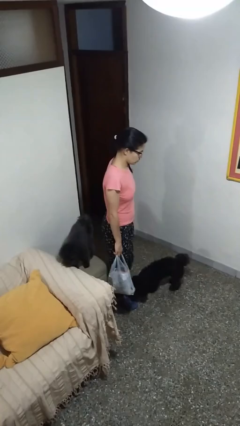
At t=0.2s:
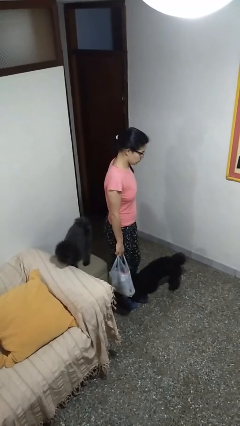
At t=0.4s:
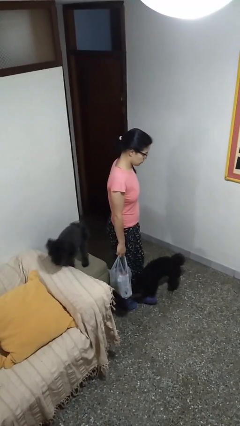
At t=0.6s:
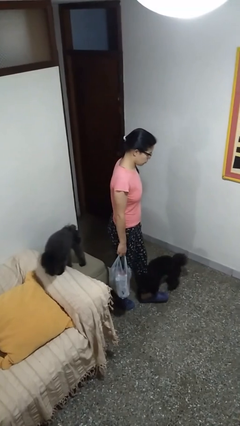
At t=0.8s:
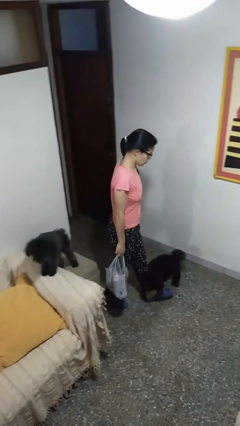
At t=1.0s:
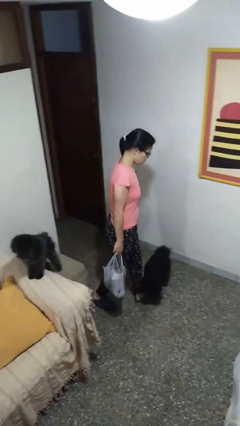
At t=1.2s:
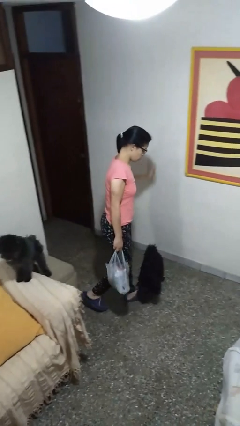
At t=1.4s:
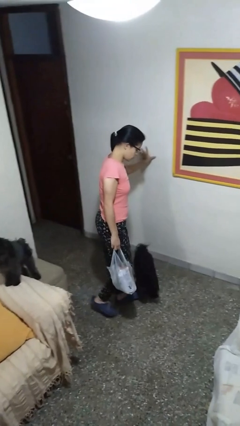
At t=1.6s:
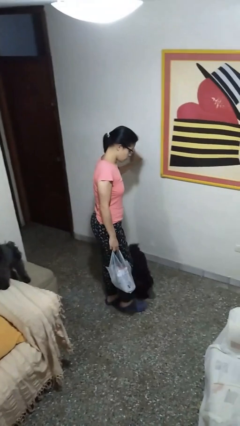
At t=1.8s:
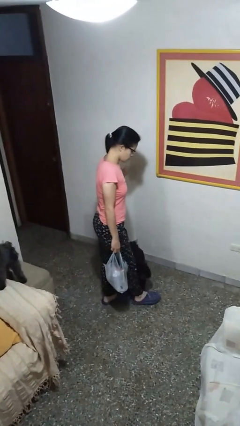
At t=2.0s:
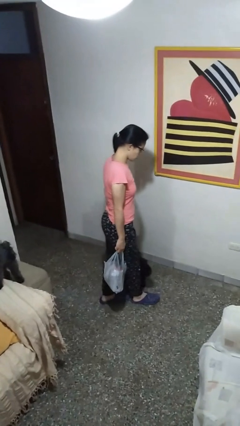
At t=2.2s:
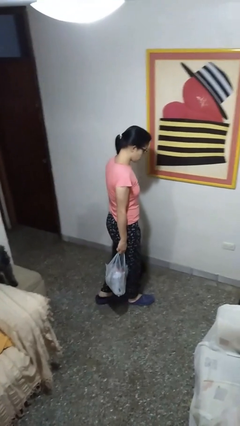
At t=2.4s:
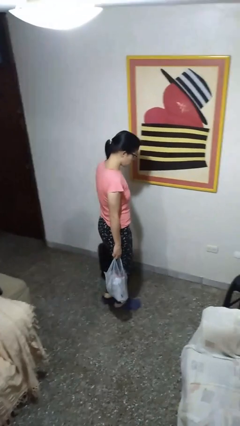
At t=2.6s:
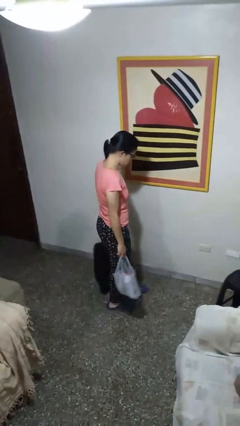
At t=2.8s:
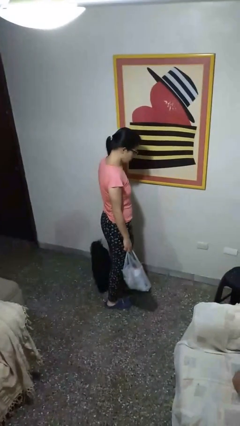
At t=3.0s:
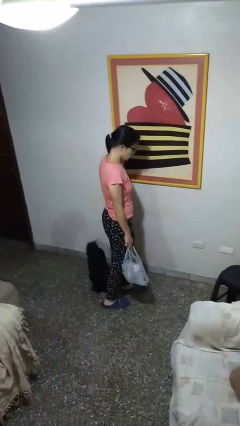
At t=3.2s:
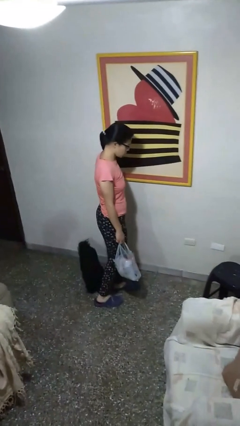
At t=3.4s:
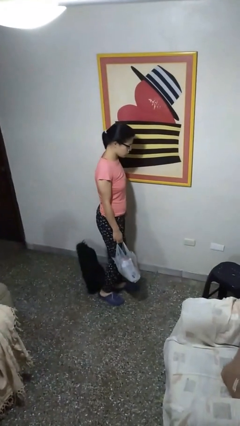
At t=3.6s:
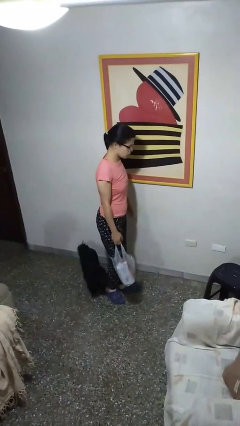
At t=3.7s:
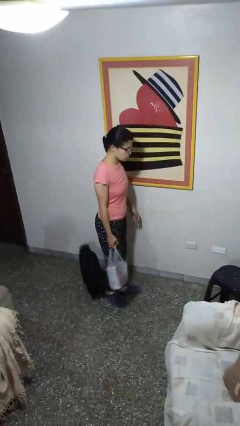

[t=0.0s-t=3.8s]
person carries groceries

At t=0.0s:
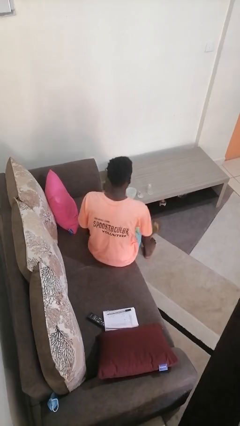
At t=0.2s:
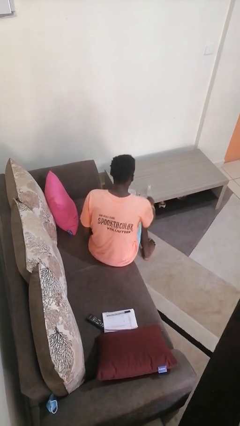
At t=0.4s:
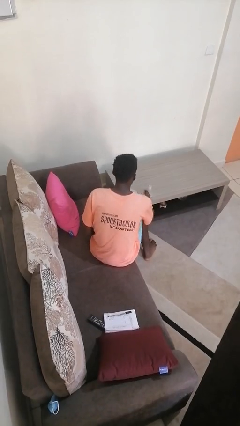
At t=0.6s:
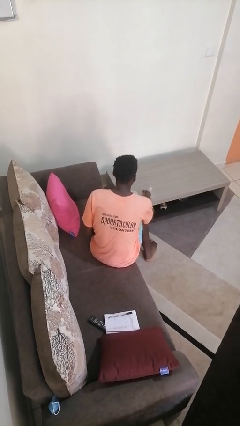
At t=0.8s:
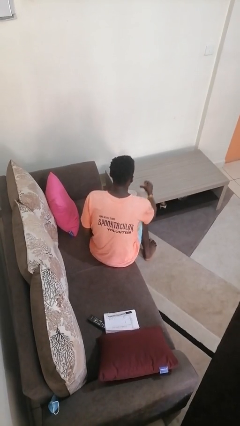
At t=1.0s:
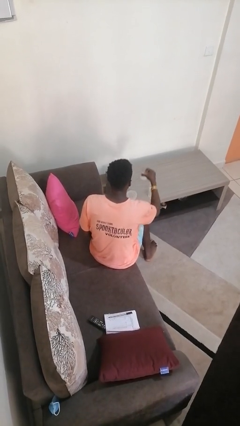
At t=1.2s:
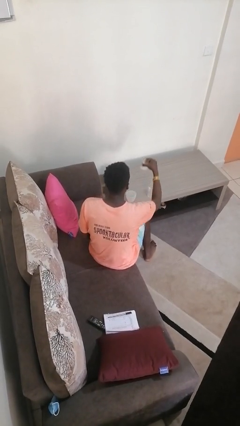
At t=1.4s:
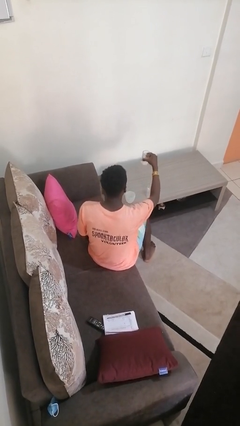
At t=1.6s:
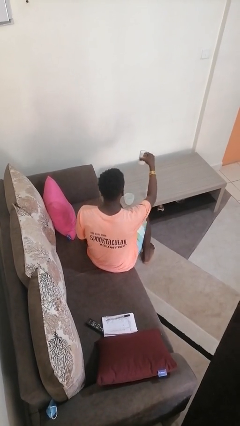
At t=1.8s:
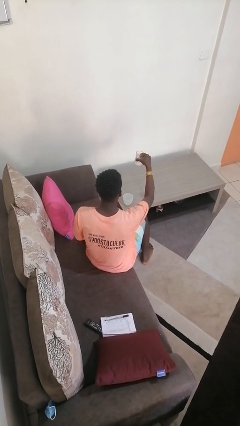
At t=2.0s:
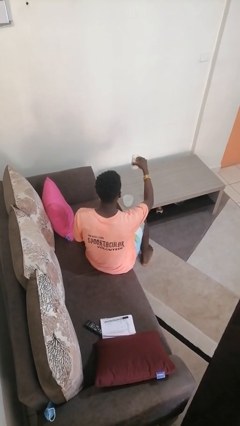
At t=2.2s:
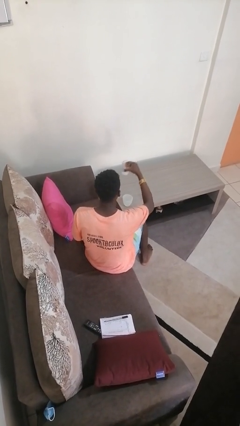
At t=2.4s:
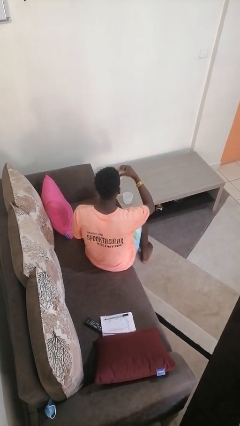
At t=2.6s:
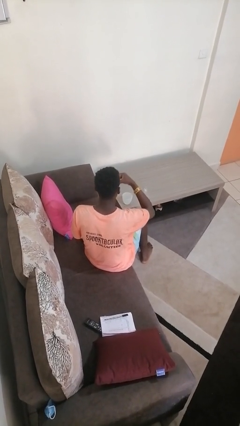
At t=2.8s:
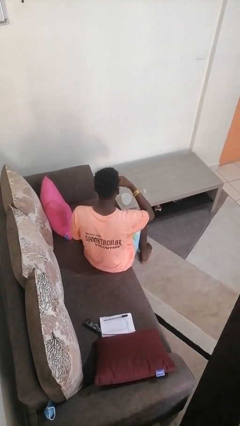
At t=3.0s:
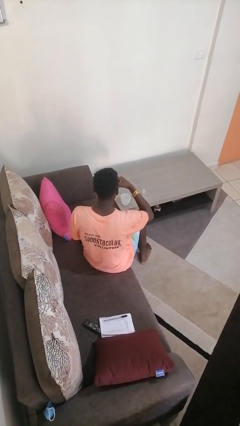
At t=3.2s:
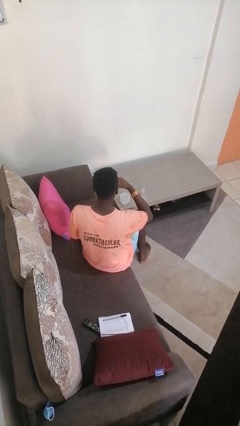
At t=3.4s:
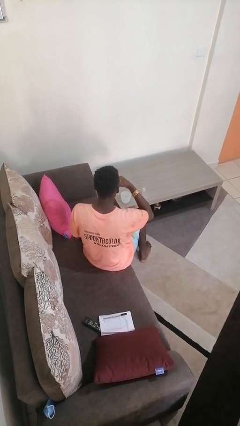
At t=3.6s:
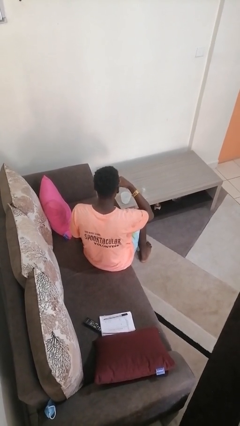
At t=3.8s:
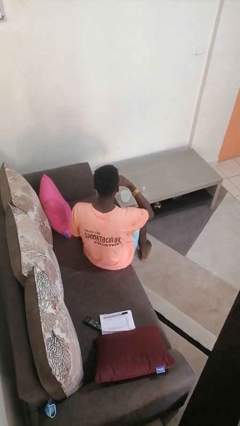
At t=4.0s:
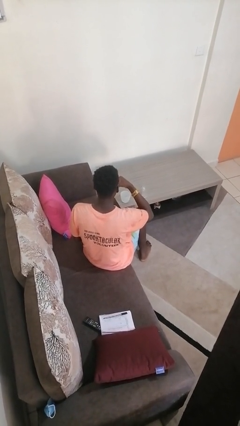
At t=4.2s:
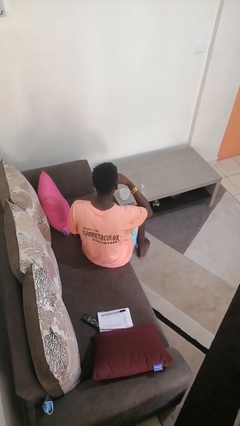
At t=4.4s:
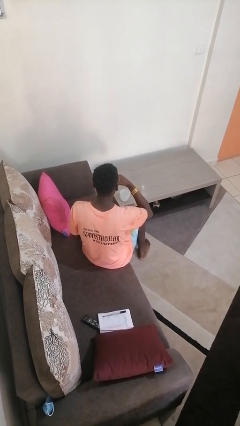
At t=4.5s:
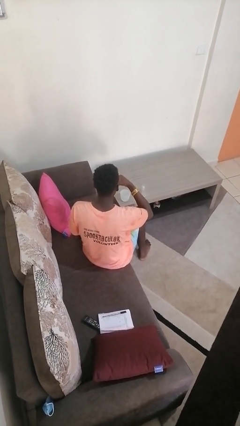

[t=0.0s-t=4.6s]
person picks up object from table

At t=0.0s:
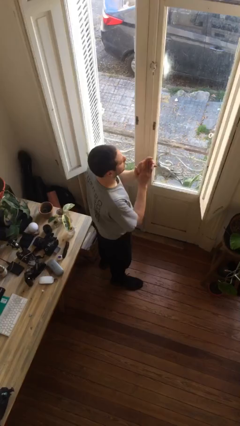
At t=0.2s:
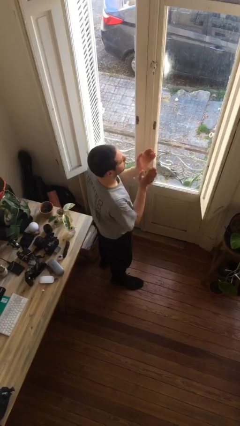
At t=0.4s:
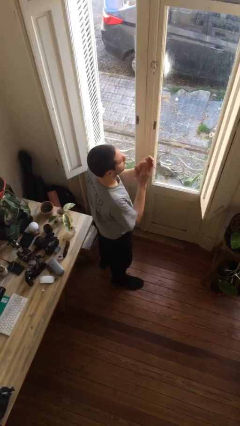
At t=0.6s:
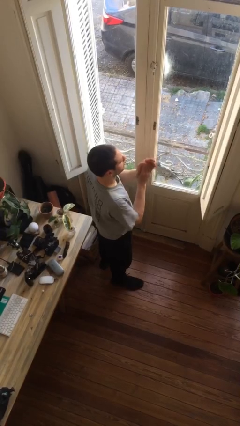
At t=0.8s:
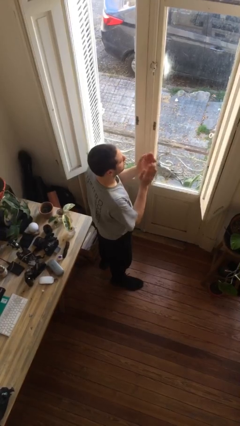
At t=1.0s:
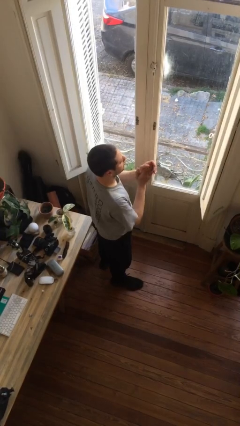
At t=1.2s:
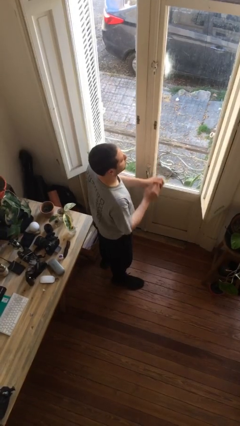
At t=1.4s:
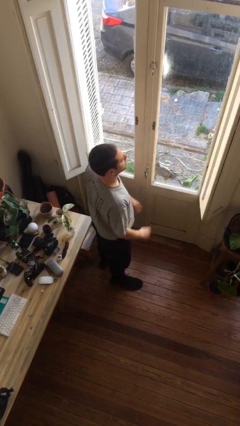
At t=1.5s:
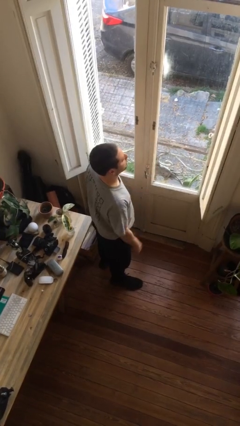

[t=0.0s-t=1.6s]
person claps hands

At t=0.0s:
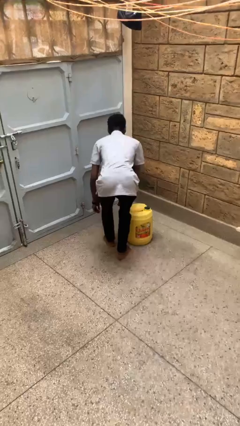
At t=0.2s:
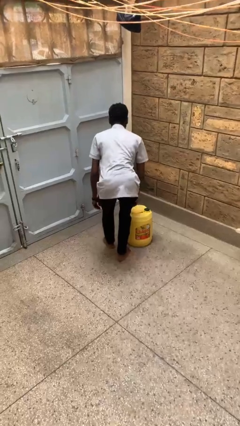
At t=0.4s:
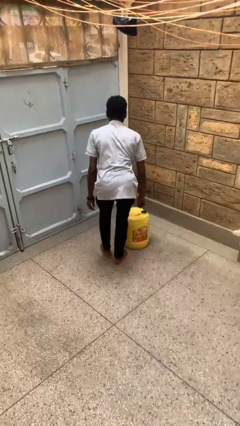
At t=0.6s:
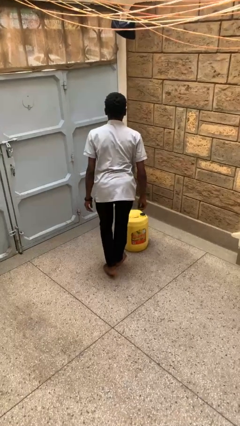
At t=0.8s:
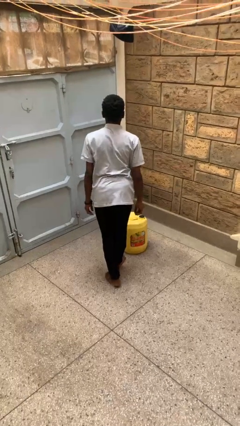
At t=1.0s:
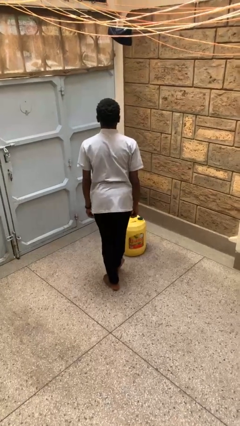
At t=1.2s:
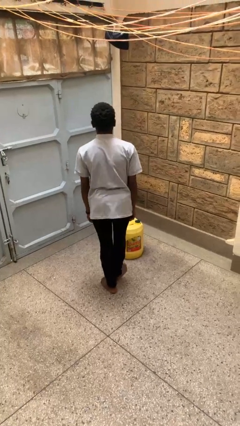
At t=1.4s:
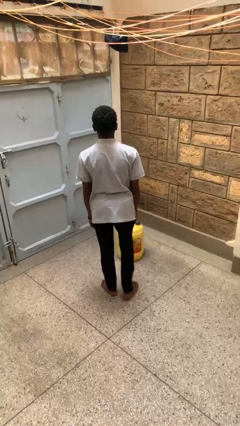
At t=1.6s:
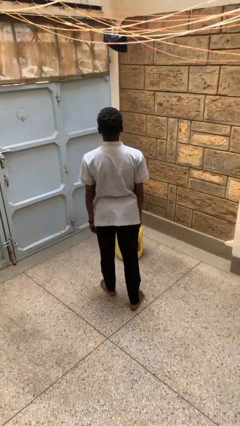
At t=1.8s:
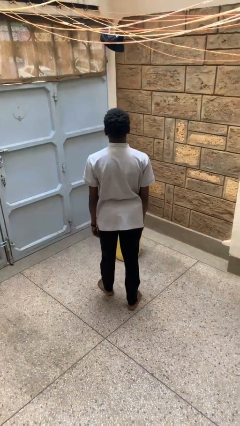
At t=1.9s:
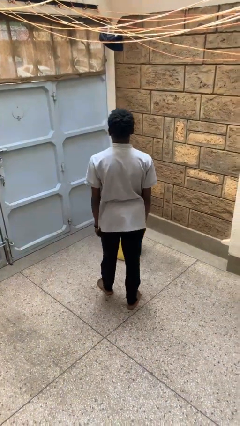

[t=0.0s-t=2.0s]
person stands up from floor

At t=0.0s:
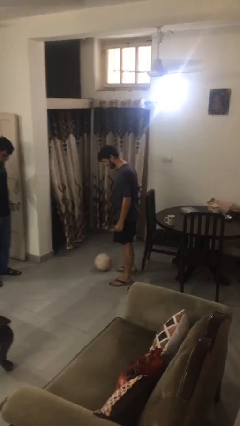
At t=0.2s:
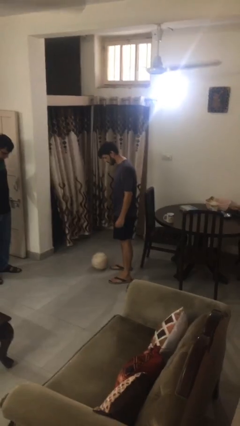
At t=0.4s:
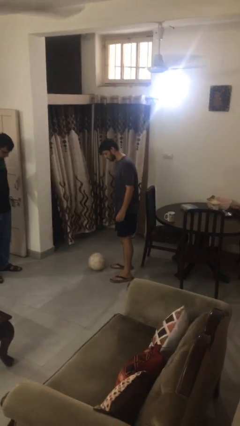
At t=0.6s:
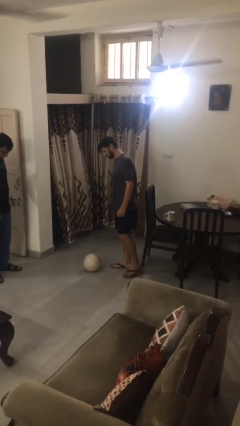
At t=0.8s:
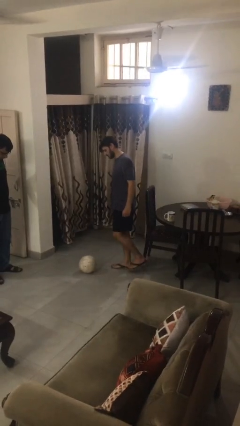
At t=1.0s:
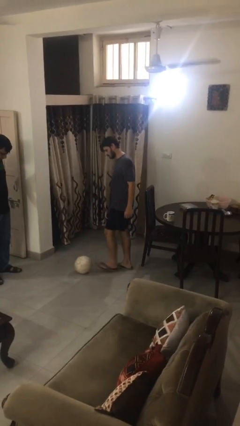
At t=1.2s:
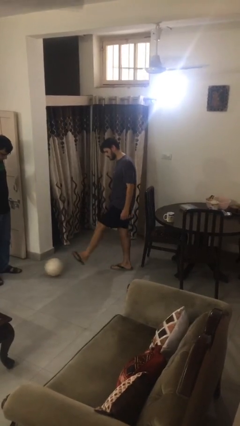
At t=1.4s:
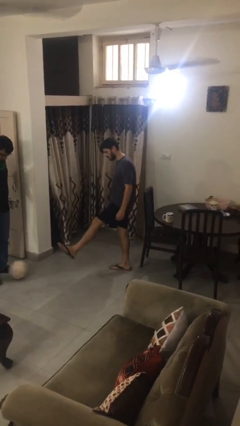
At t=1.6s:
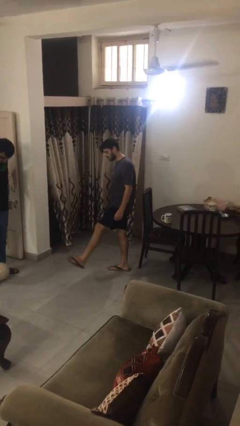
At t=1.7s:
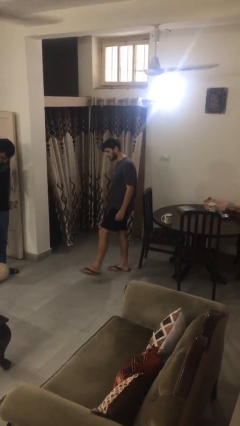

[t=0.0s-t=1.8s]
person kicks object to person

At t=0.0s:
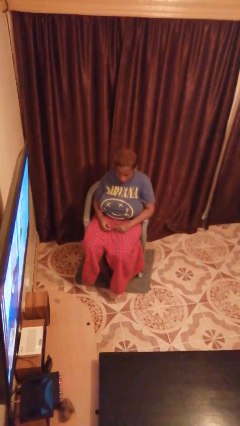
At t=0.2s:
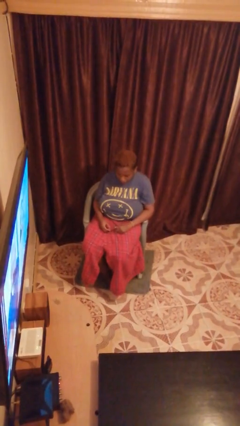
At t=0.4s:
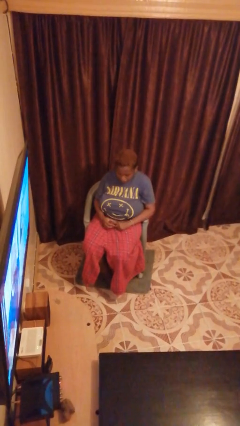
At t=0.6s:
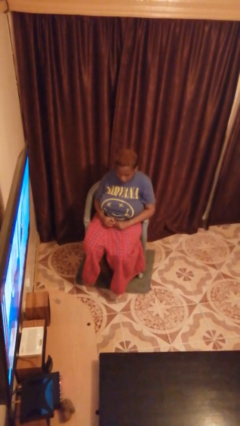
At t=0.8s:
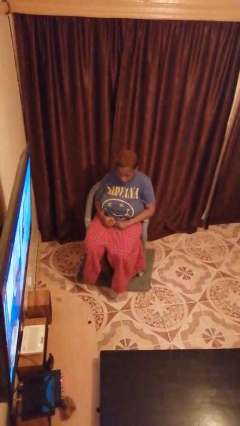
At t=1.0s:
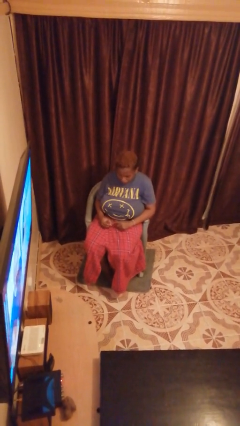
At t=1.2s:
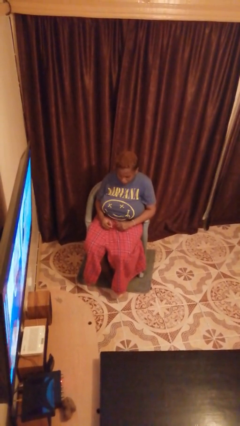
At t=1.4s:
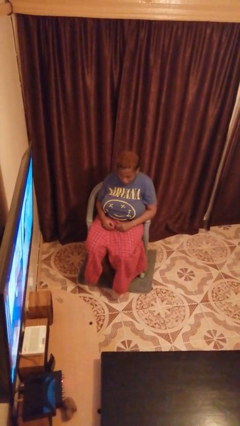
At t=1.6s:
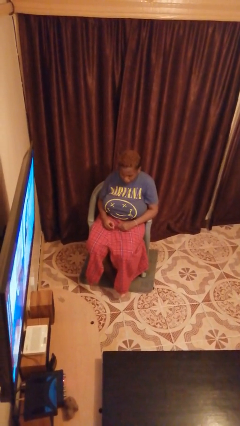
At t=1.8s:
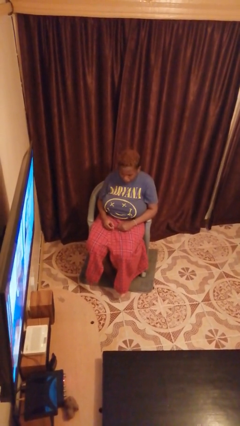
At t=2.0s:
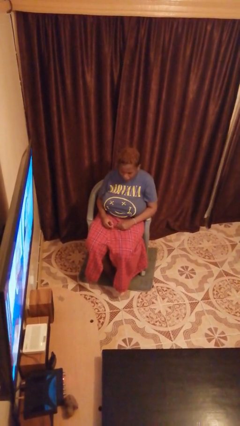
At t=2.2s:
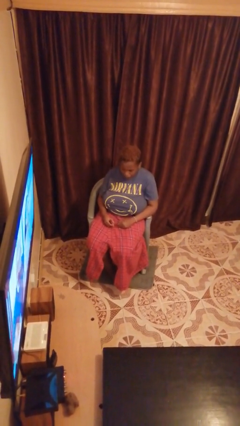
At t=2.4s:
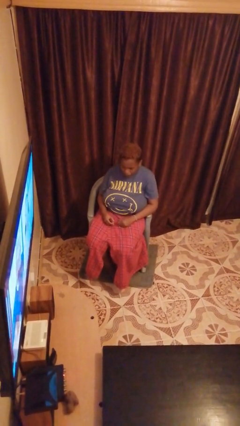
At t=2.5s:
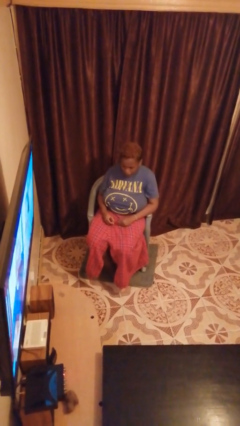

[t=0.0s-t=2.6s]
person takes off ring

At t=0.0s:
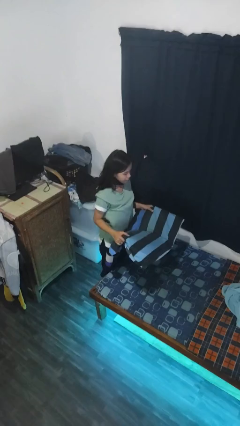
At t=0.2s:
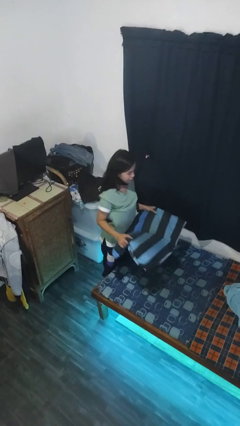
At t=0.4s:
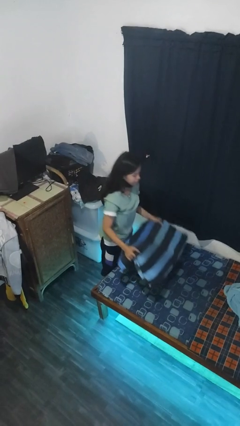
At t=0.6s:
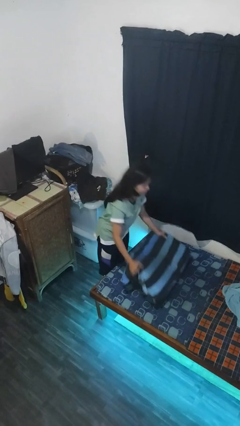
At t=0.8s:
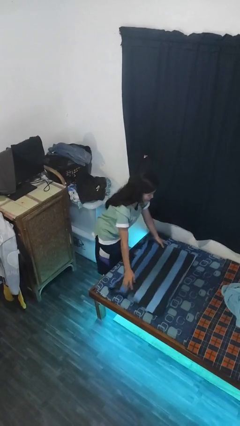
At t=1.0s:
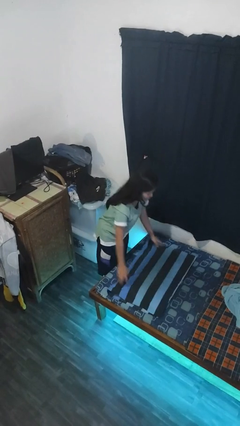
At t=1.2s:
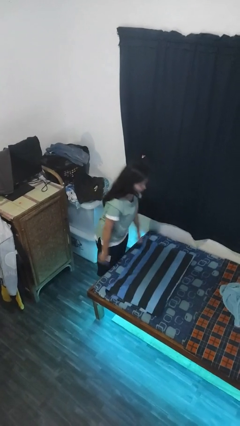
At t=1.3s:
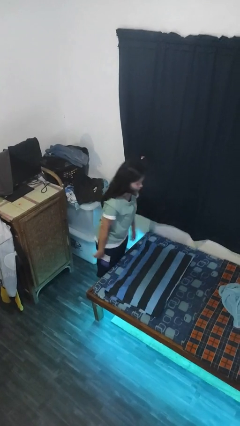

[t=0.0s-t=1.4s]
person puts down object on bed
